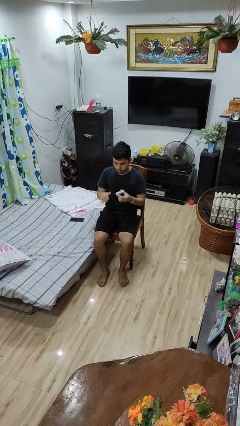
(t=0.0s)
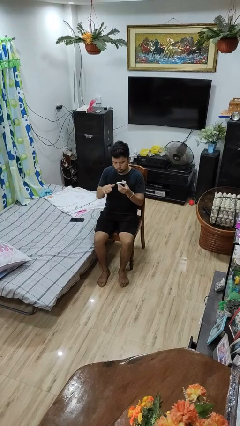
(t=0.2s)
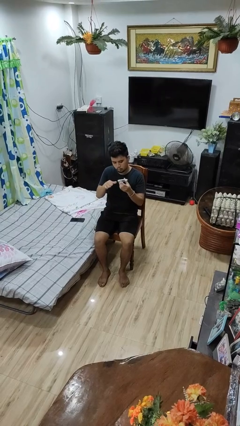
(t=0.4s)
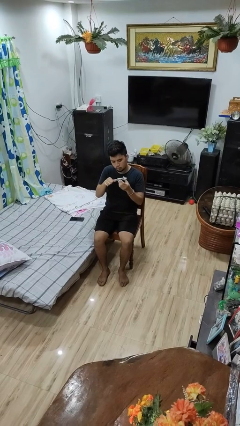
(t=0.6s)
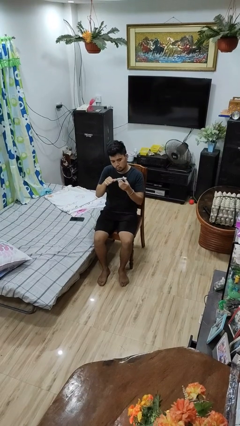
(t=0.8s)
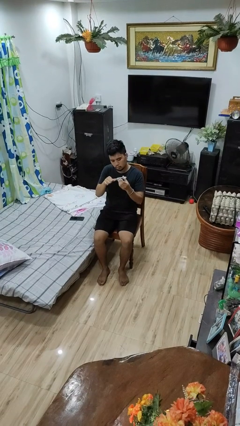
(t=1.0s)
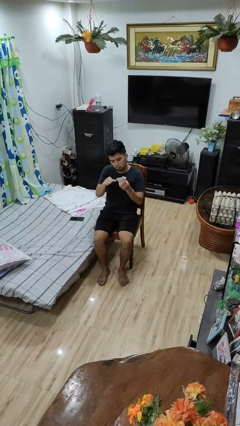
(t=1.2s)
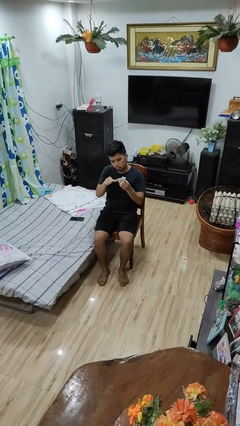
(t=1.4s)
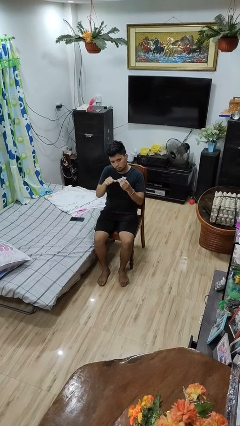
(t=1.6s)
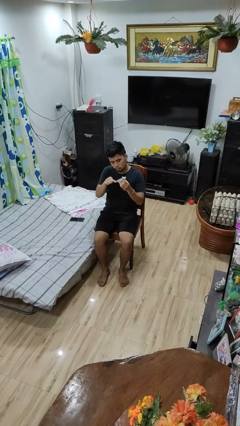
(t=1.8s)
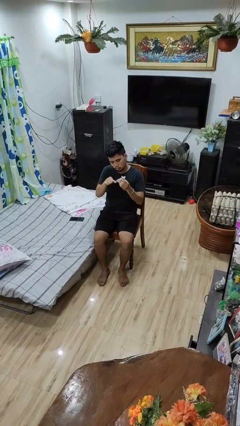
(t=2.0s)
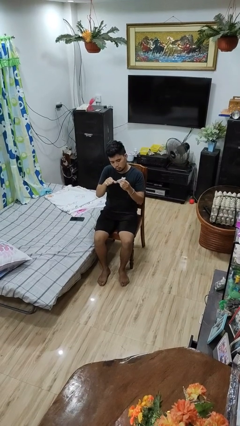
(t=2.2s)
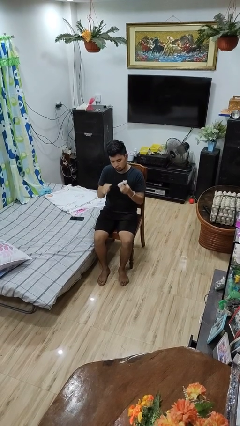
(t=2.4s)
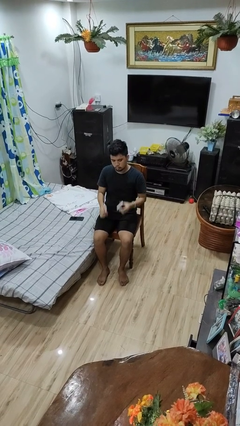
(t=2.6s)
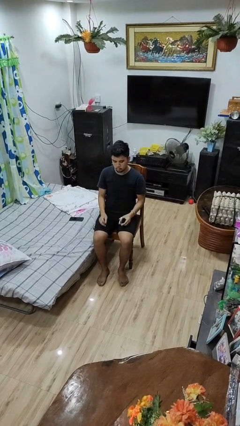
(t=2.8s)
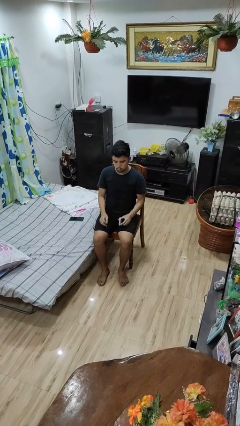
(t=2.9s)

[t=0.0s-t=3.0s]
person clips fingernails

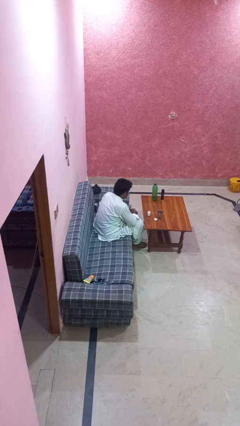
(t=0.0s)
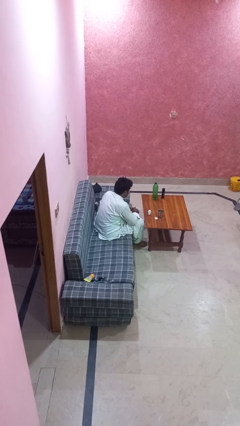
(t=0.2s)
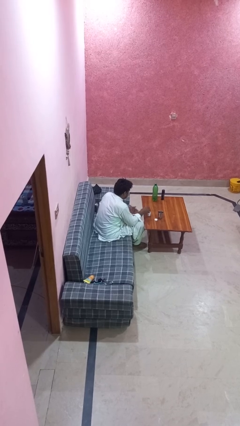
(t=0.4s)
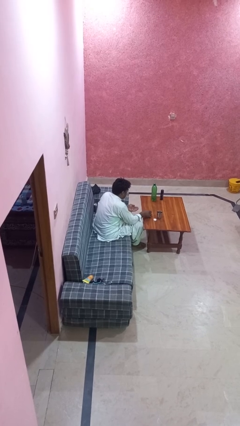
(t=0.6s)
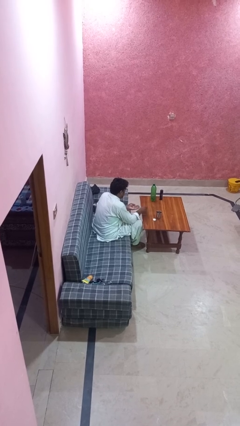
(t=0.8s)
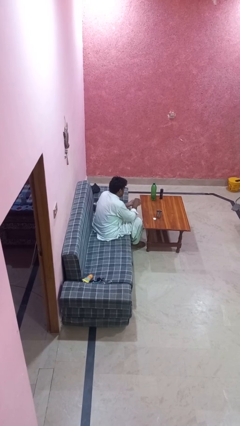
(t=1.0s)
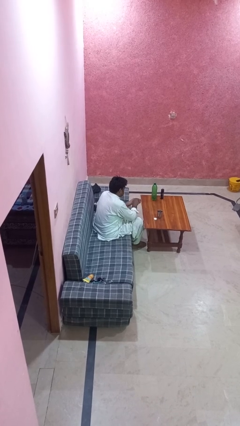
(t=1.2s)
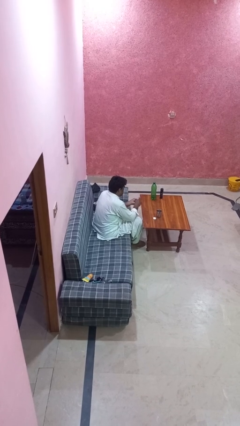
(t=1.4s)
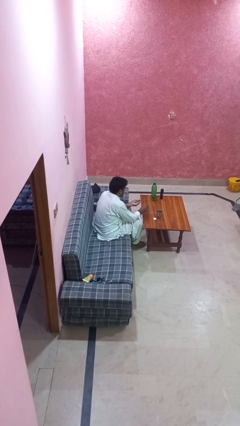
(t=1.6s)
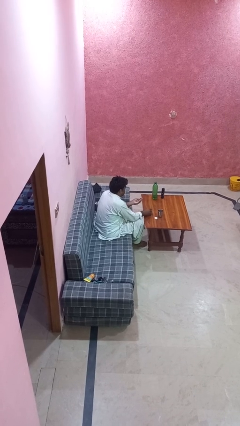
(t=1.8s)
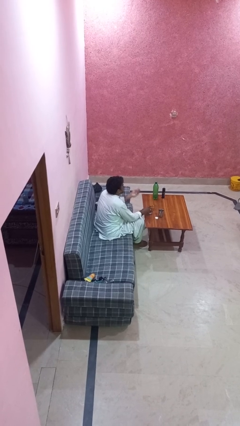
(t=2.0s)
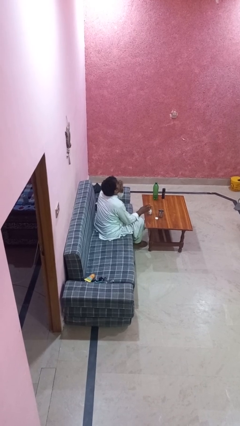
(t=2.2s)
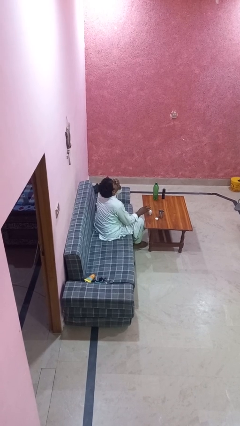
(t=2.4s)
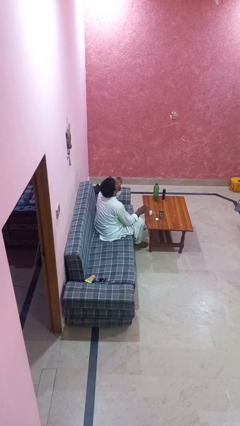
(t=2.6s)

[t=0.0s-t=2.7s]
person takes medicine pills

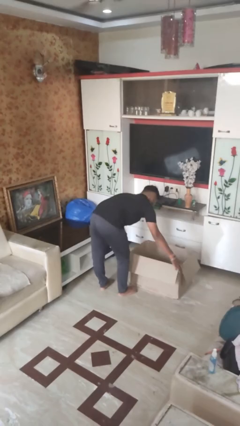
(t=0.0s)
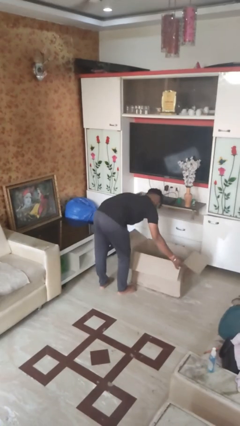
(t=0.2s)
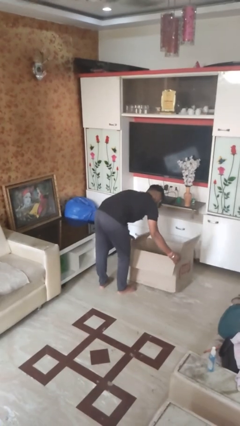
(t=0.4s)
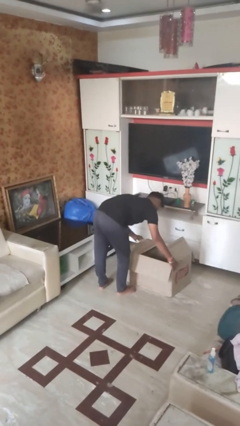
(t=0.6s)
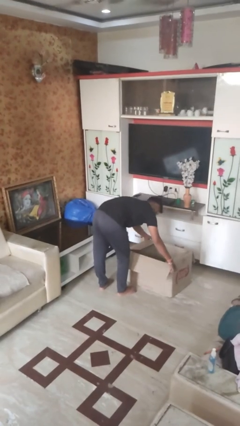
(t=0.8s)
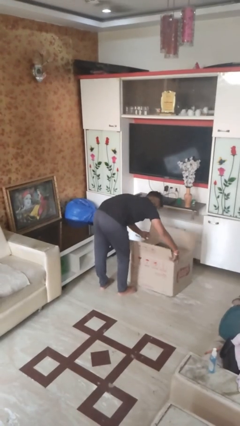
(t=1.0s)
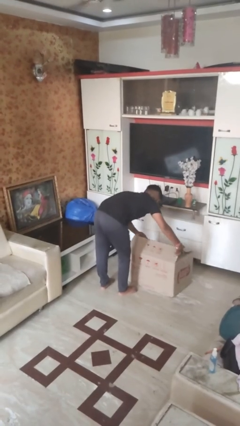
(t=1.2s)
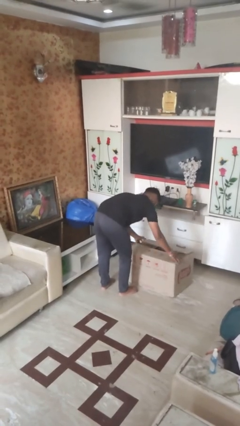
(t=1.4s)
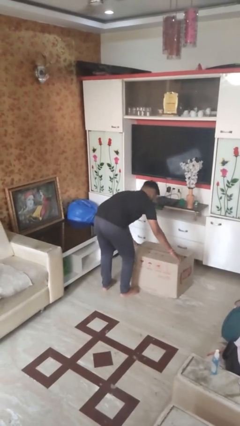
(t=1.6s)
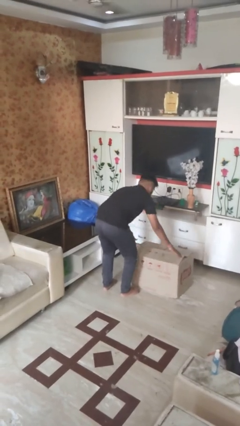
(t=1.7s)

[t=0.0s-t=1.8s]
person closes box

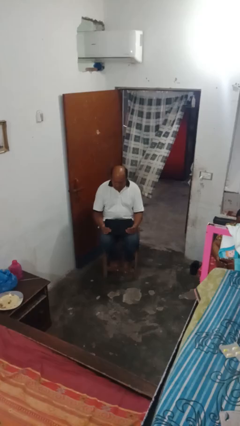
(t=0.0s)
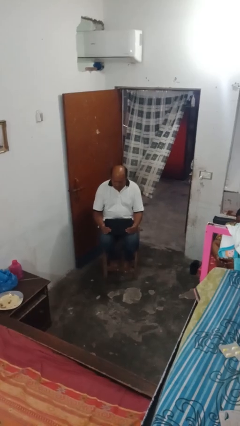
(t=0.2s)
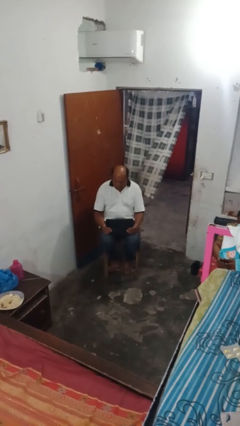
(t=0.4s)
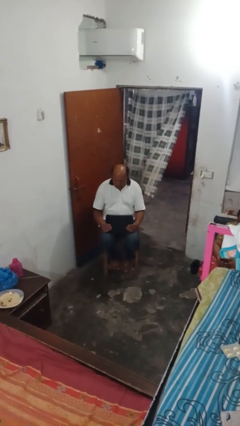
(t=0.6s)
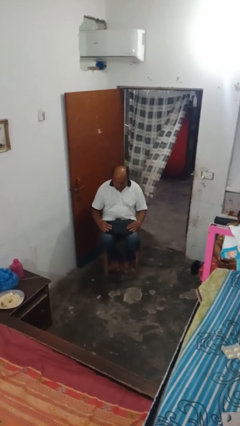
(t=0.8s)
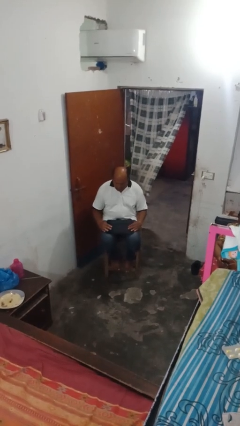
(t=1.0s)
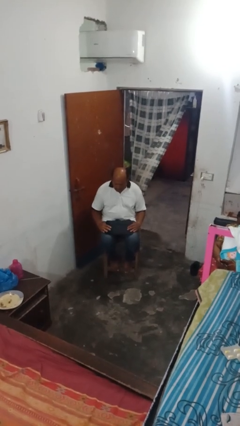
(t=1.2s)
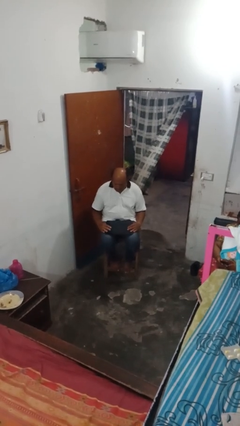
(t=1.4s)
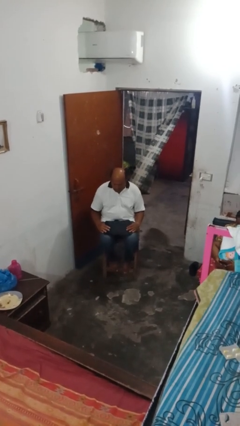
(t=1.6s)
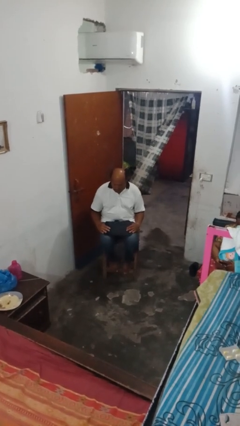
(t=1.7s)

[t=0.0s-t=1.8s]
person closes laptop

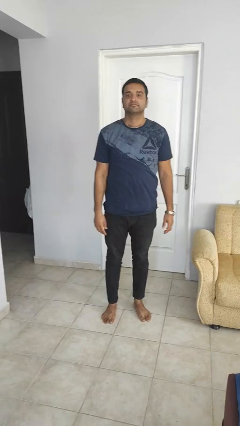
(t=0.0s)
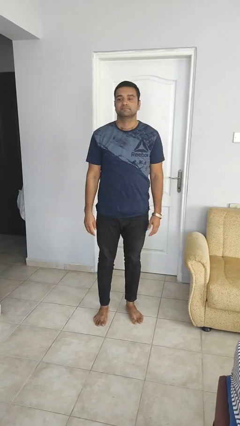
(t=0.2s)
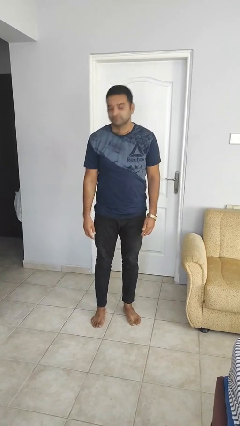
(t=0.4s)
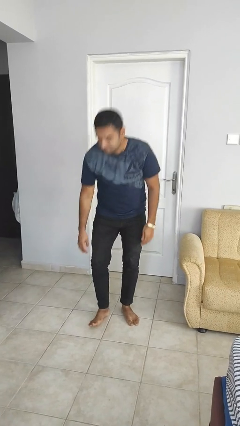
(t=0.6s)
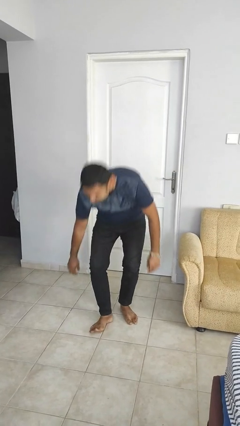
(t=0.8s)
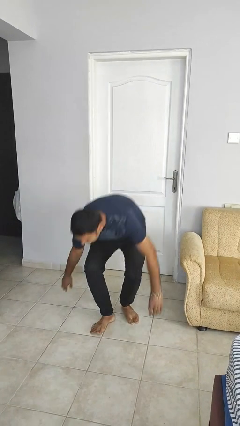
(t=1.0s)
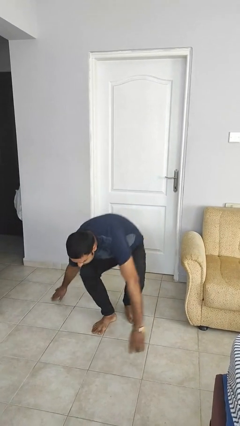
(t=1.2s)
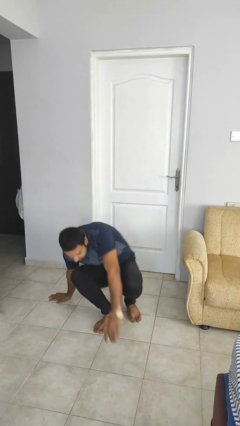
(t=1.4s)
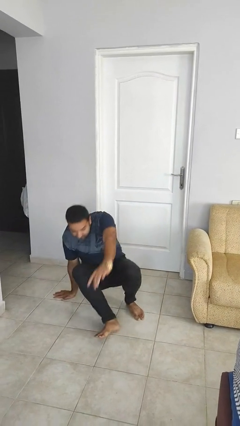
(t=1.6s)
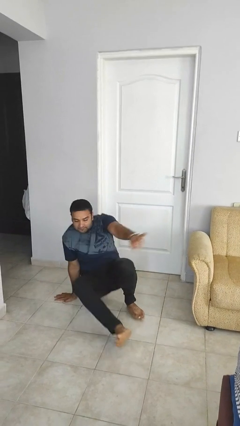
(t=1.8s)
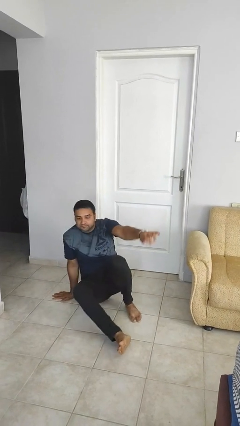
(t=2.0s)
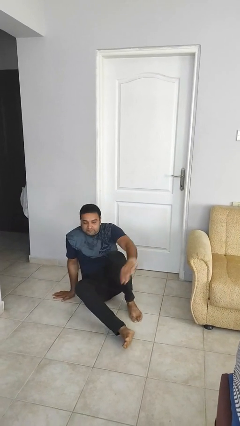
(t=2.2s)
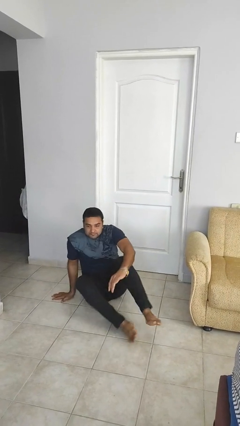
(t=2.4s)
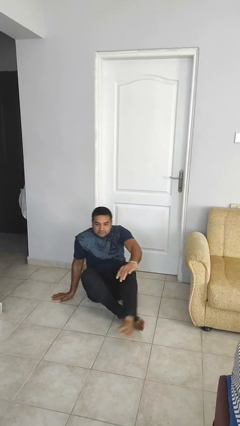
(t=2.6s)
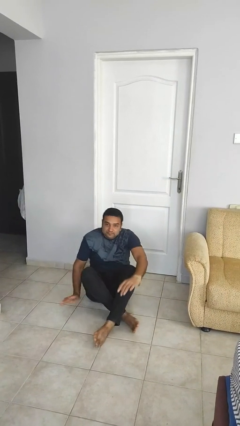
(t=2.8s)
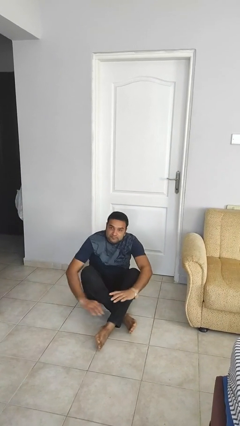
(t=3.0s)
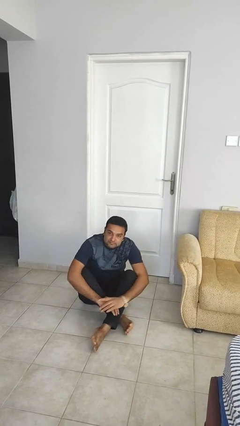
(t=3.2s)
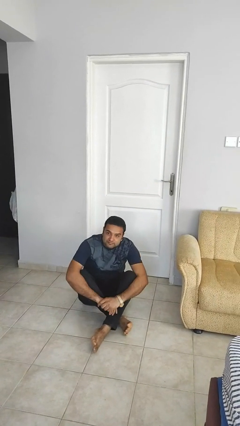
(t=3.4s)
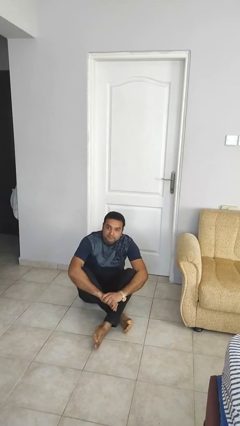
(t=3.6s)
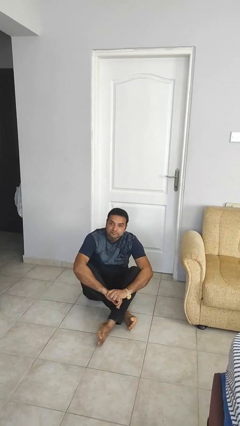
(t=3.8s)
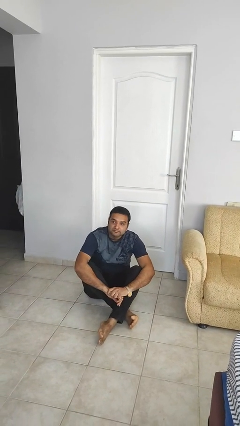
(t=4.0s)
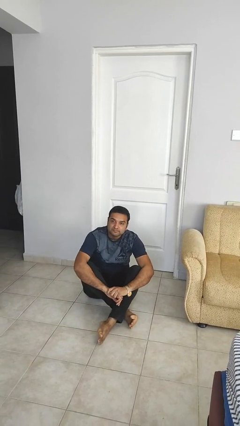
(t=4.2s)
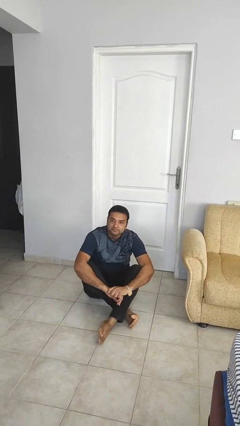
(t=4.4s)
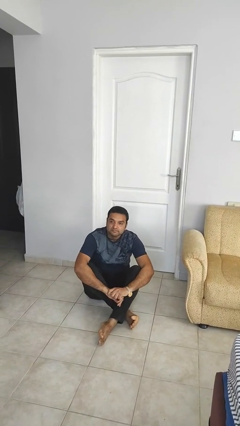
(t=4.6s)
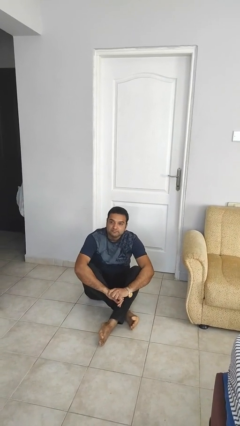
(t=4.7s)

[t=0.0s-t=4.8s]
person sits crisscross

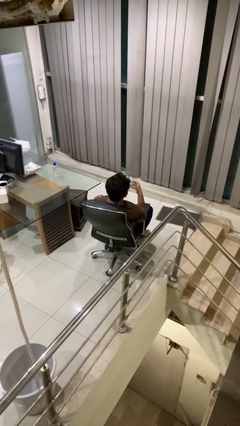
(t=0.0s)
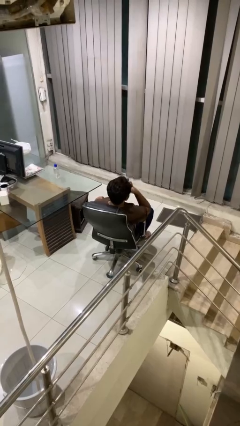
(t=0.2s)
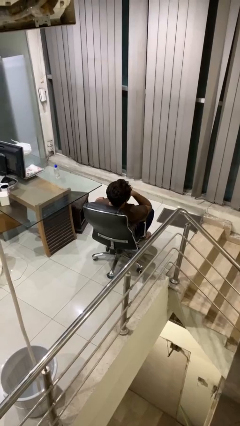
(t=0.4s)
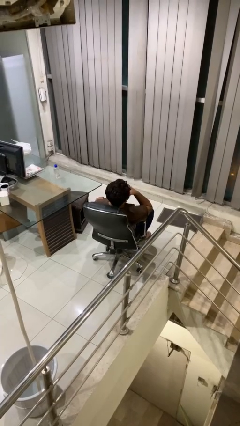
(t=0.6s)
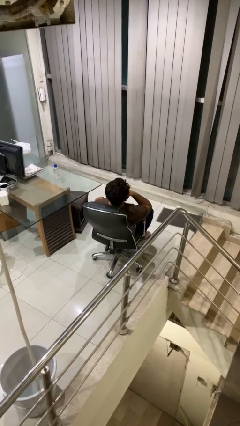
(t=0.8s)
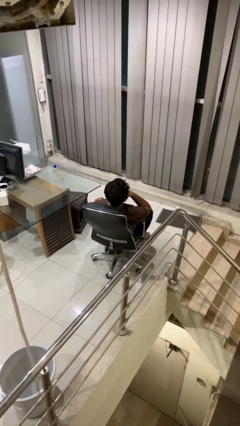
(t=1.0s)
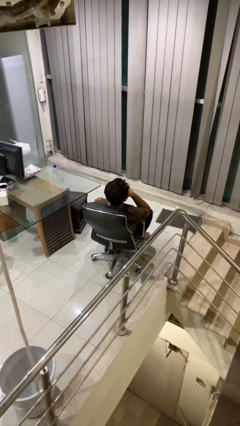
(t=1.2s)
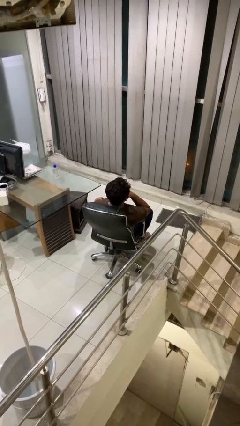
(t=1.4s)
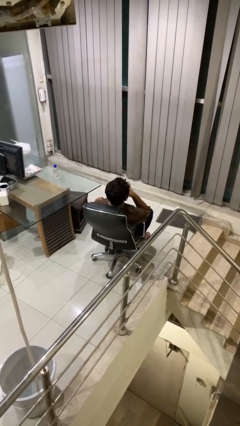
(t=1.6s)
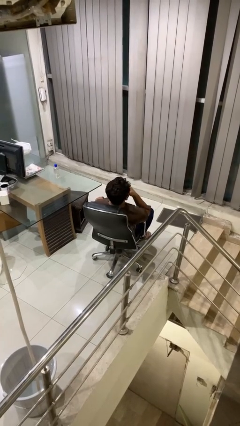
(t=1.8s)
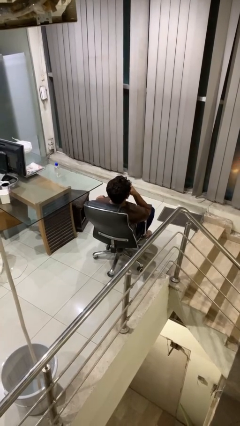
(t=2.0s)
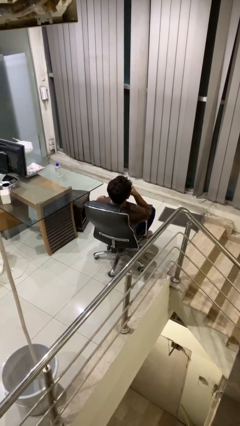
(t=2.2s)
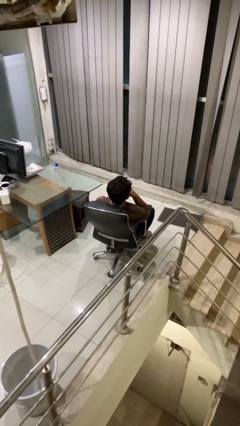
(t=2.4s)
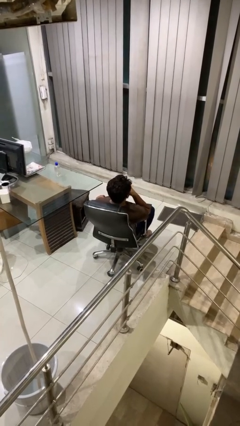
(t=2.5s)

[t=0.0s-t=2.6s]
person strokes chin

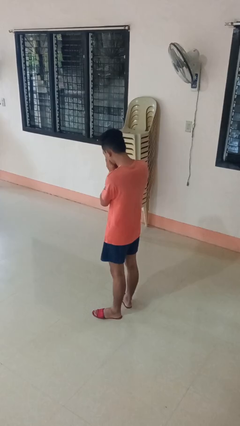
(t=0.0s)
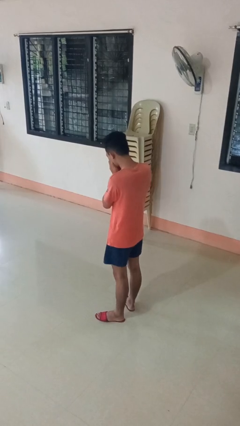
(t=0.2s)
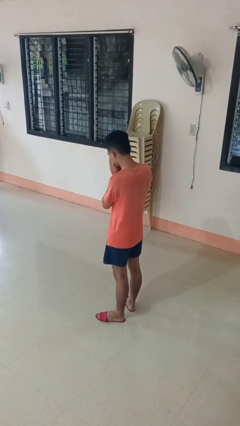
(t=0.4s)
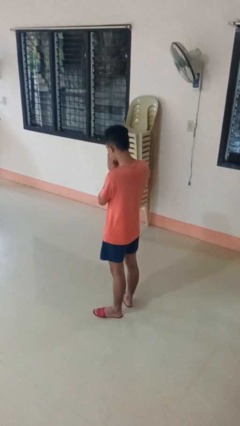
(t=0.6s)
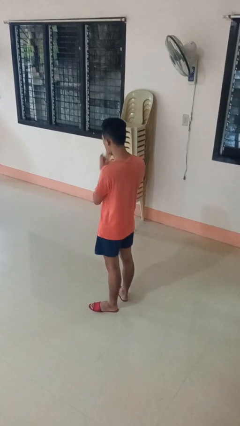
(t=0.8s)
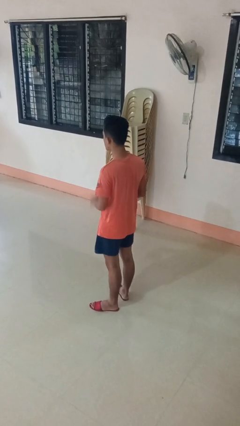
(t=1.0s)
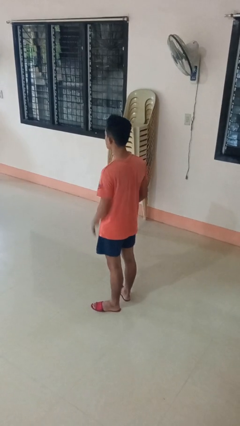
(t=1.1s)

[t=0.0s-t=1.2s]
person shrugs
